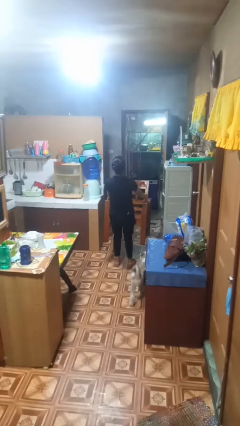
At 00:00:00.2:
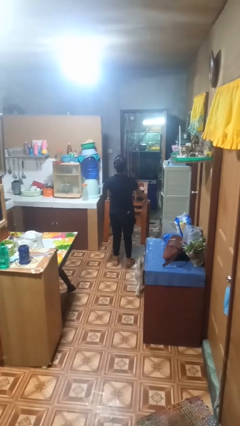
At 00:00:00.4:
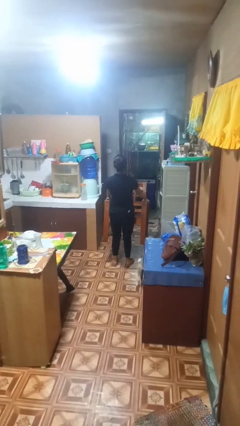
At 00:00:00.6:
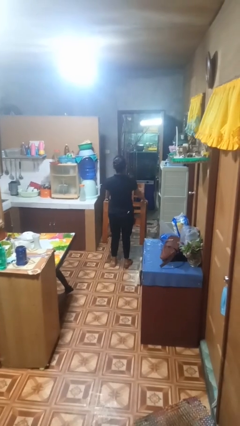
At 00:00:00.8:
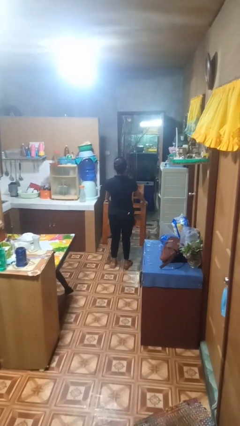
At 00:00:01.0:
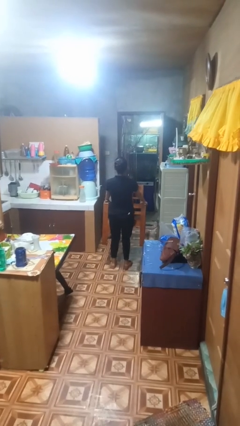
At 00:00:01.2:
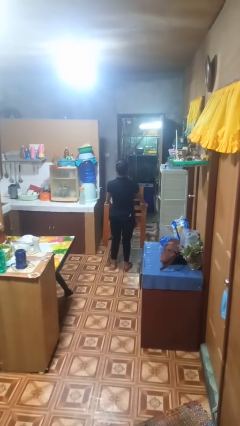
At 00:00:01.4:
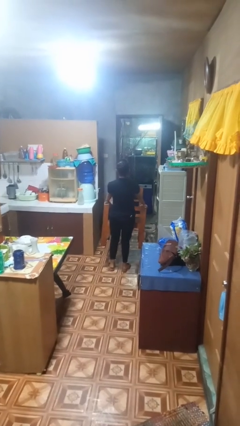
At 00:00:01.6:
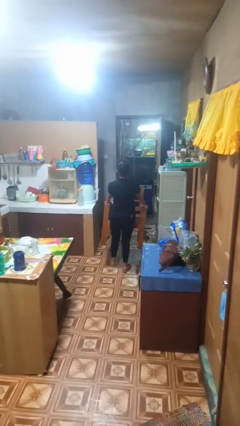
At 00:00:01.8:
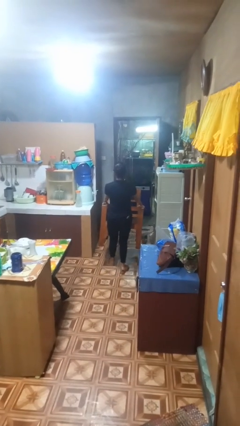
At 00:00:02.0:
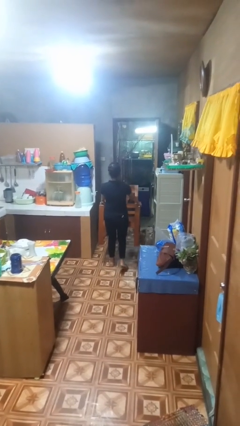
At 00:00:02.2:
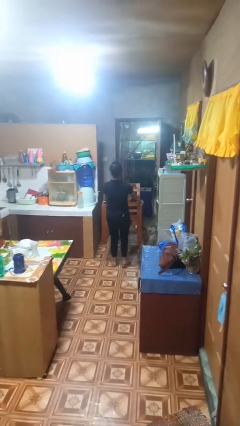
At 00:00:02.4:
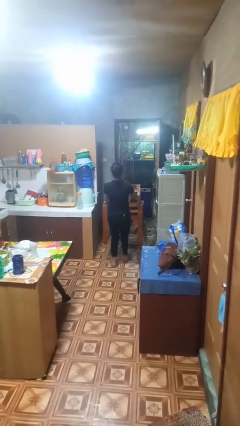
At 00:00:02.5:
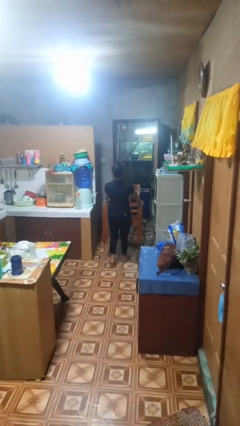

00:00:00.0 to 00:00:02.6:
person carries furniture

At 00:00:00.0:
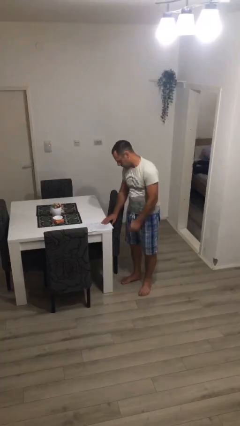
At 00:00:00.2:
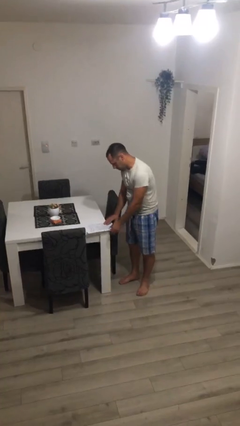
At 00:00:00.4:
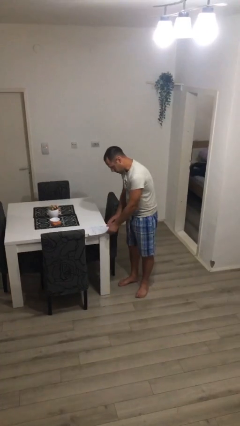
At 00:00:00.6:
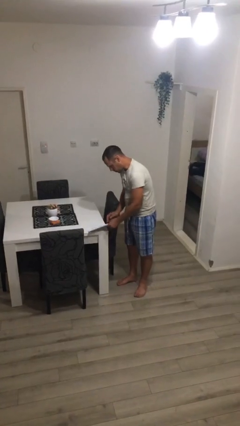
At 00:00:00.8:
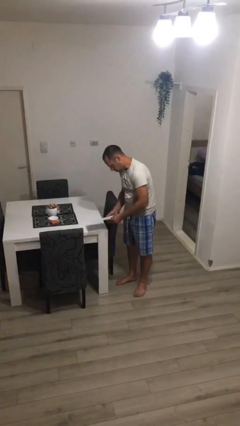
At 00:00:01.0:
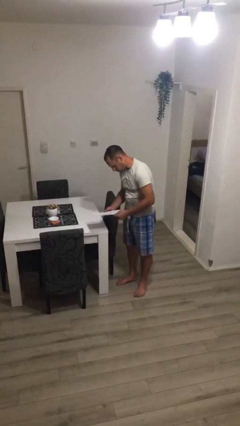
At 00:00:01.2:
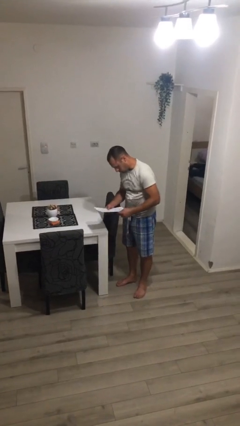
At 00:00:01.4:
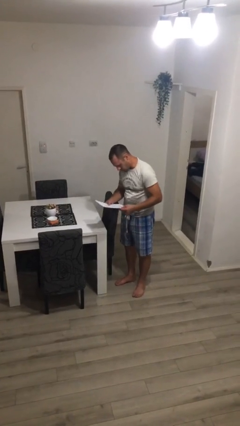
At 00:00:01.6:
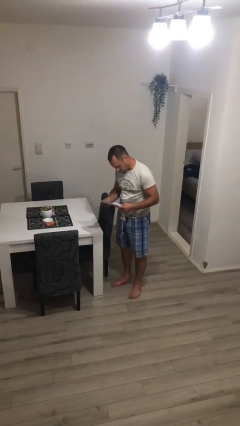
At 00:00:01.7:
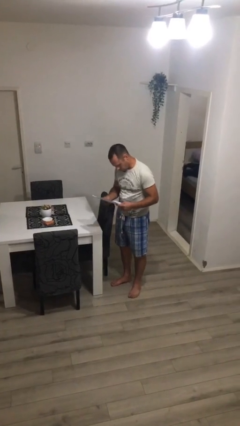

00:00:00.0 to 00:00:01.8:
person picks up object from table

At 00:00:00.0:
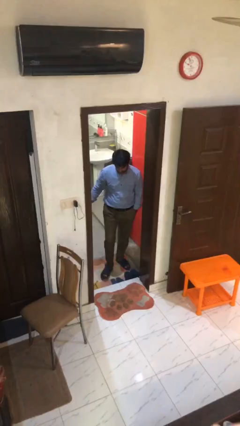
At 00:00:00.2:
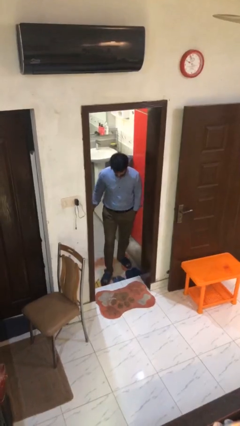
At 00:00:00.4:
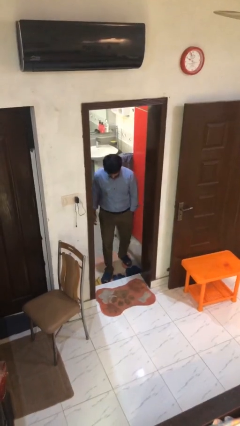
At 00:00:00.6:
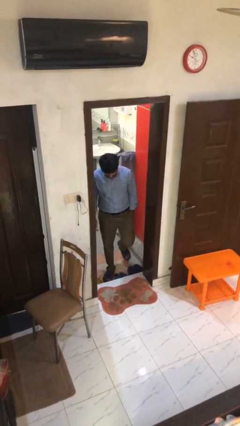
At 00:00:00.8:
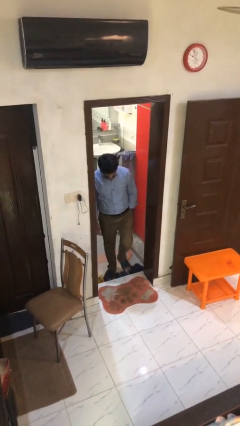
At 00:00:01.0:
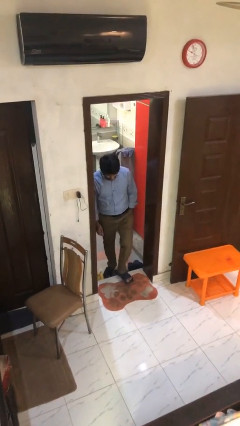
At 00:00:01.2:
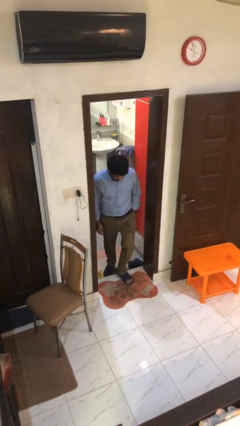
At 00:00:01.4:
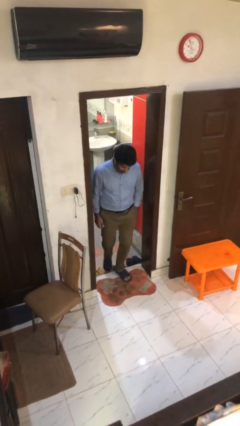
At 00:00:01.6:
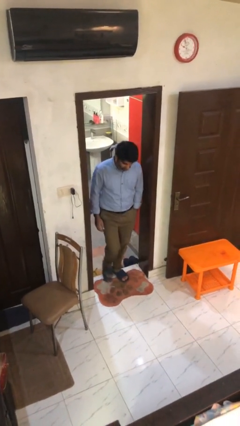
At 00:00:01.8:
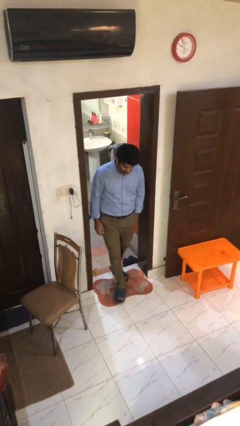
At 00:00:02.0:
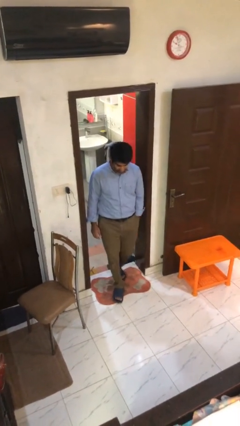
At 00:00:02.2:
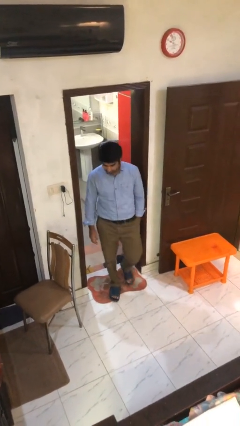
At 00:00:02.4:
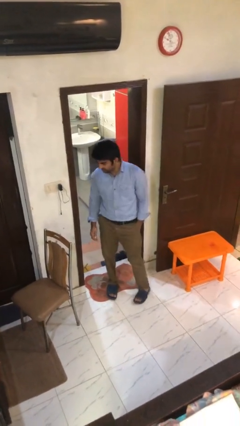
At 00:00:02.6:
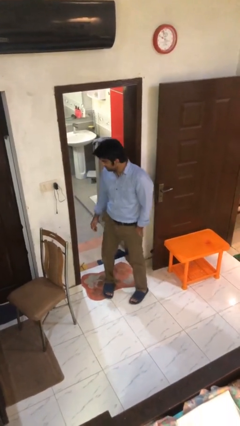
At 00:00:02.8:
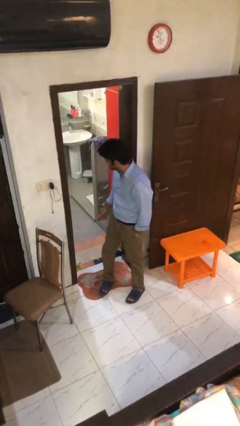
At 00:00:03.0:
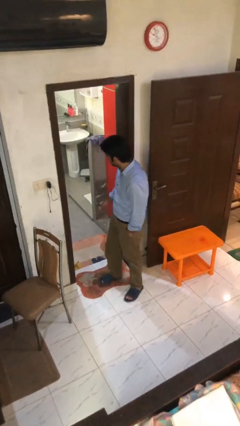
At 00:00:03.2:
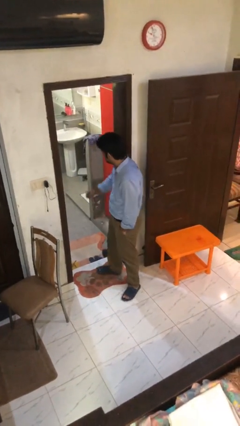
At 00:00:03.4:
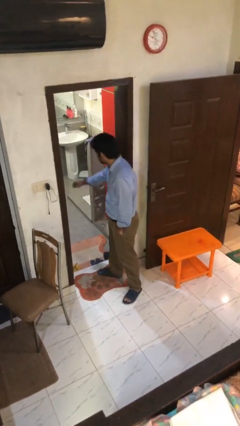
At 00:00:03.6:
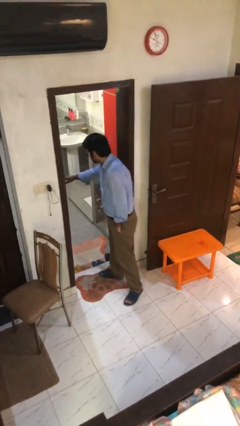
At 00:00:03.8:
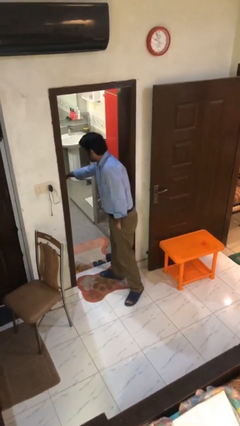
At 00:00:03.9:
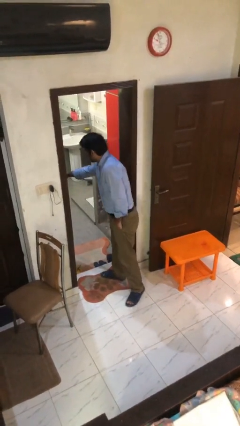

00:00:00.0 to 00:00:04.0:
person enters scene through structure

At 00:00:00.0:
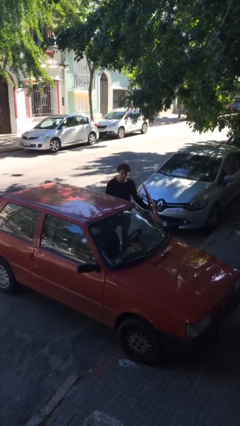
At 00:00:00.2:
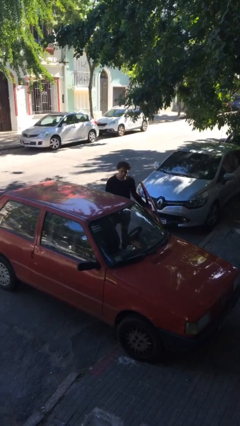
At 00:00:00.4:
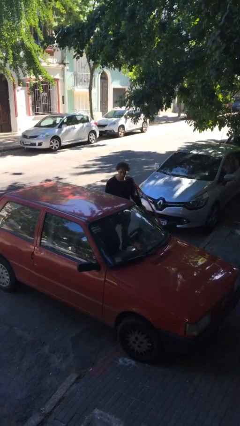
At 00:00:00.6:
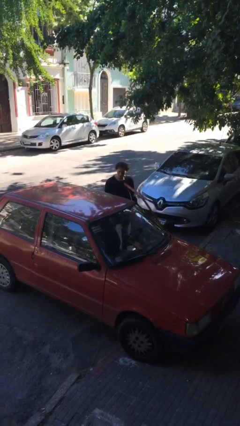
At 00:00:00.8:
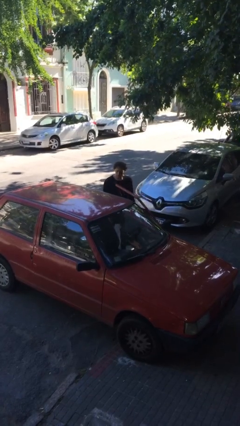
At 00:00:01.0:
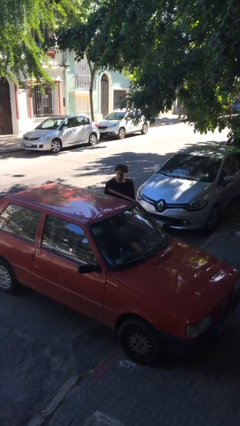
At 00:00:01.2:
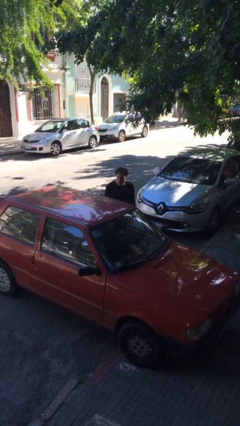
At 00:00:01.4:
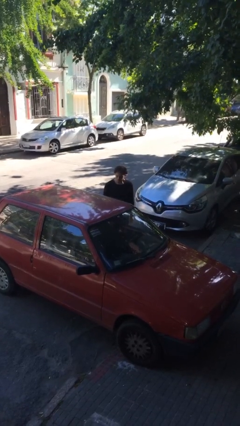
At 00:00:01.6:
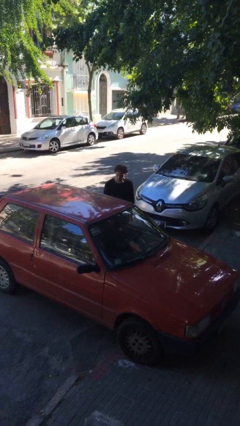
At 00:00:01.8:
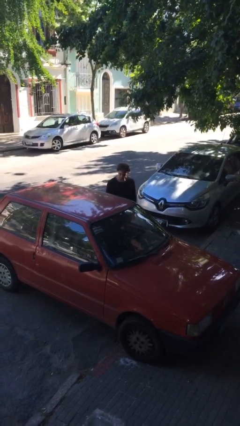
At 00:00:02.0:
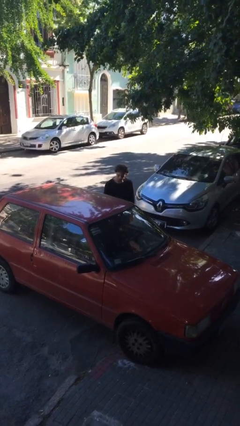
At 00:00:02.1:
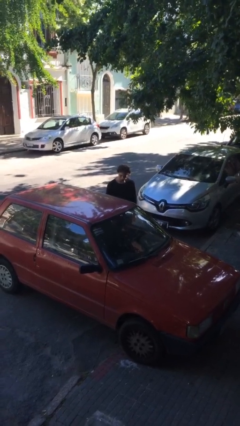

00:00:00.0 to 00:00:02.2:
person closes car door

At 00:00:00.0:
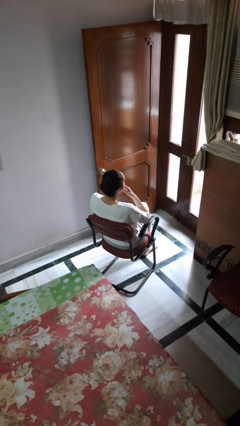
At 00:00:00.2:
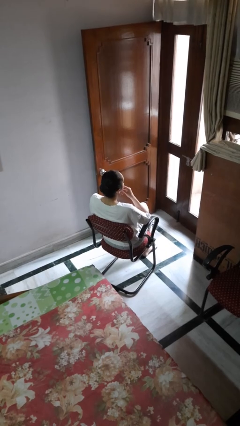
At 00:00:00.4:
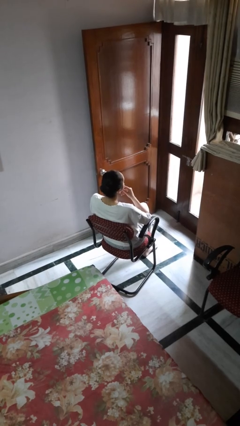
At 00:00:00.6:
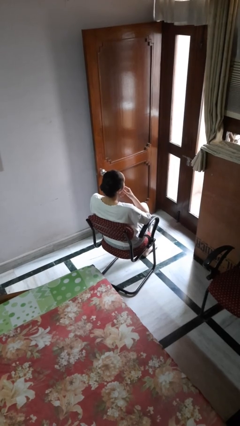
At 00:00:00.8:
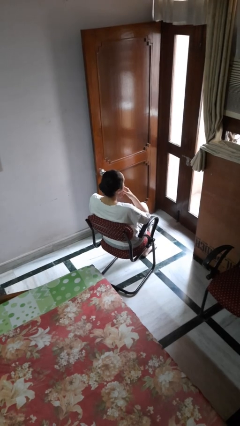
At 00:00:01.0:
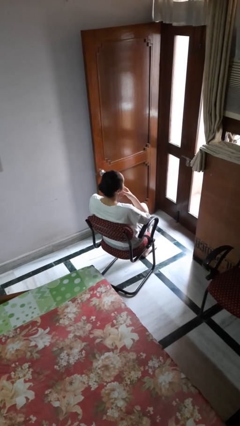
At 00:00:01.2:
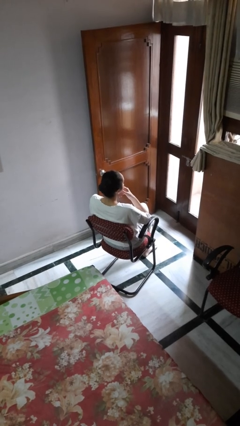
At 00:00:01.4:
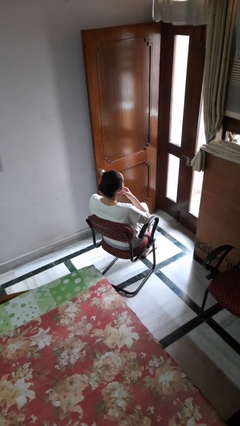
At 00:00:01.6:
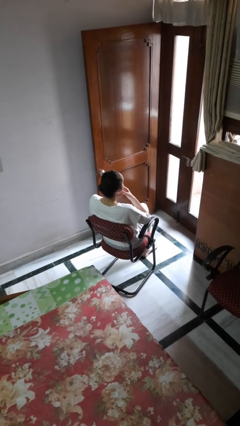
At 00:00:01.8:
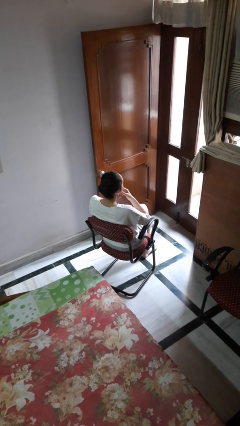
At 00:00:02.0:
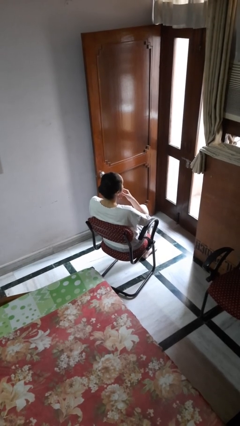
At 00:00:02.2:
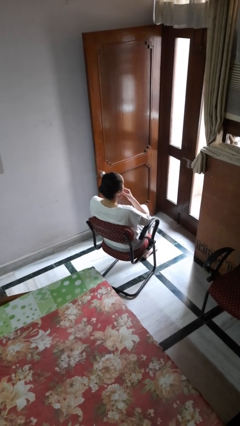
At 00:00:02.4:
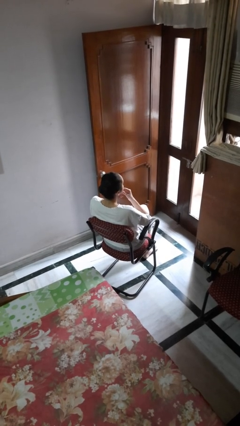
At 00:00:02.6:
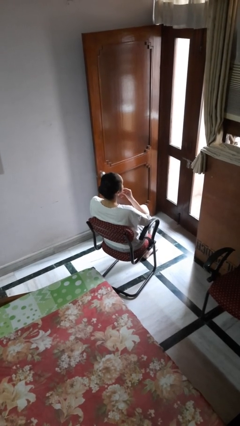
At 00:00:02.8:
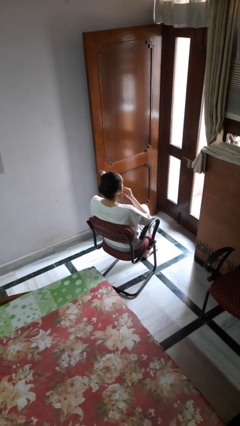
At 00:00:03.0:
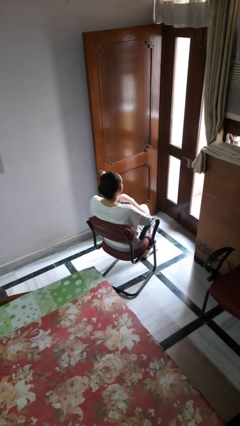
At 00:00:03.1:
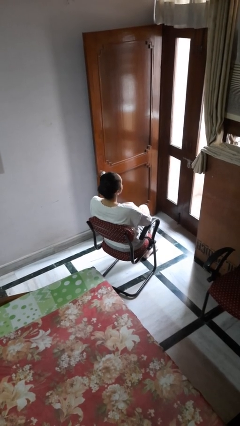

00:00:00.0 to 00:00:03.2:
person strokes chin

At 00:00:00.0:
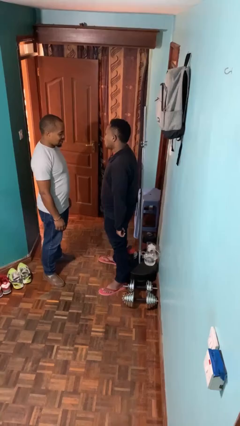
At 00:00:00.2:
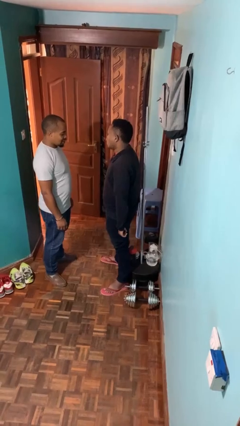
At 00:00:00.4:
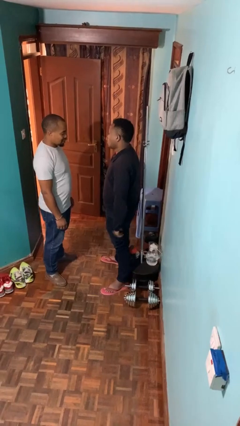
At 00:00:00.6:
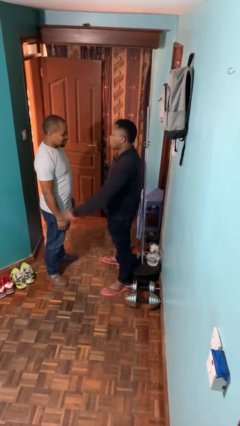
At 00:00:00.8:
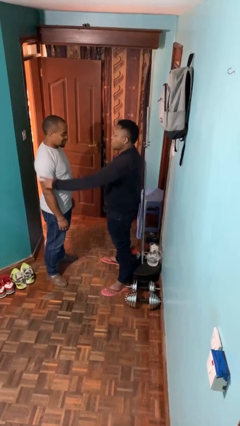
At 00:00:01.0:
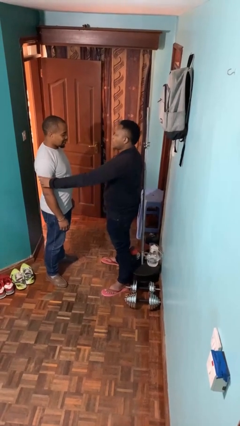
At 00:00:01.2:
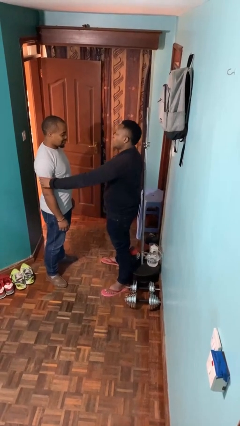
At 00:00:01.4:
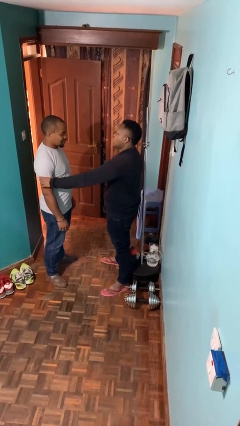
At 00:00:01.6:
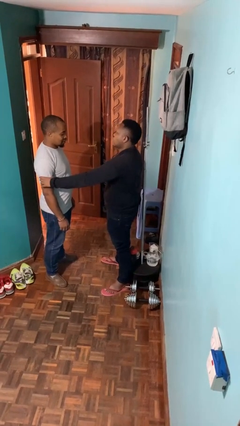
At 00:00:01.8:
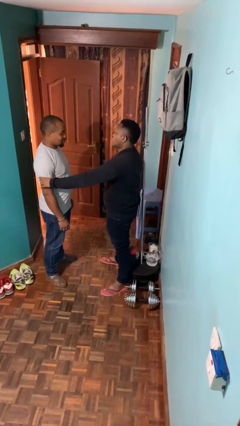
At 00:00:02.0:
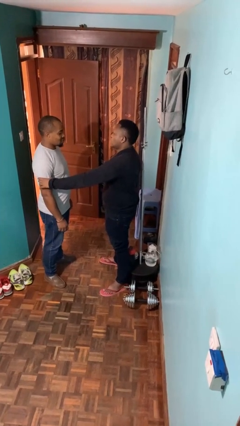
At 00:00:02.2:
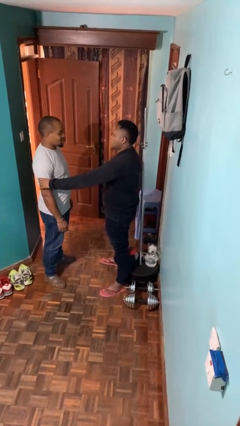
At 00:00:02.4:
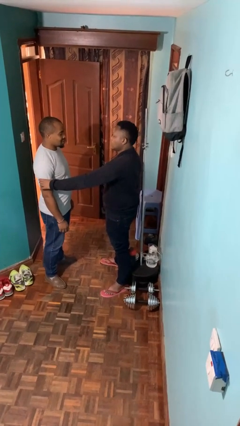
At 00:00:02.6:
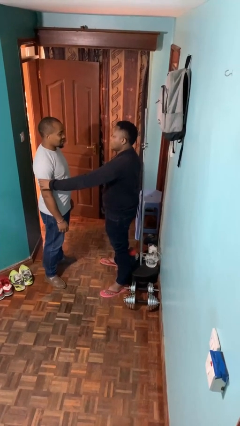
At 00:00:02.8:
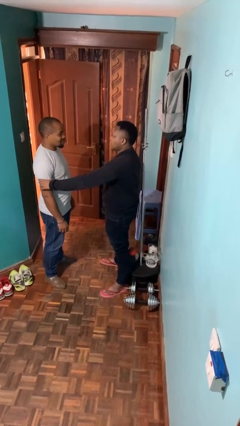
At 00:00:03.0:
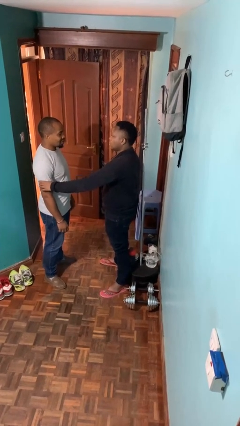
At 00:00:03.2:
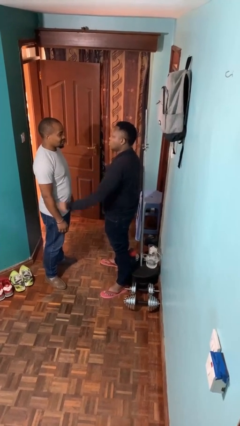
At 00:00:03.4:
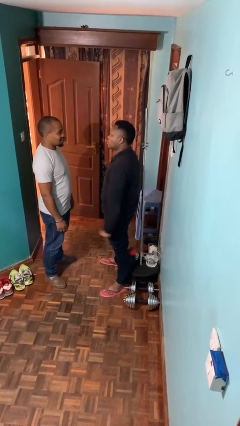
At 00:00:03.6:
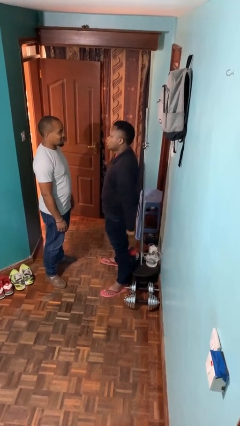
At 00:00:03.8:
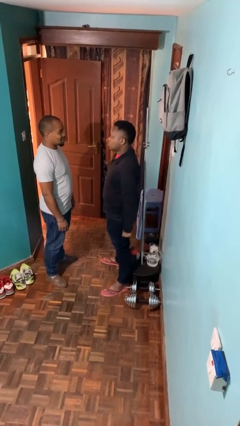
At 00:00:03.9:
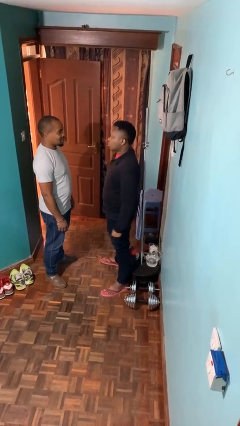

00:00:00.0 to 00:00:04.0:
person grabs person by bicep
